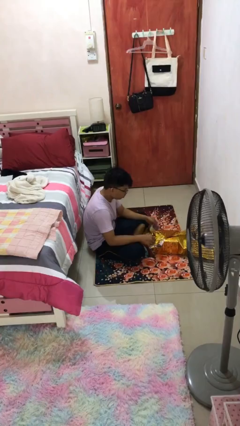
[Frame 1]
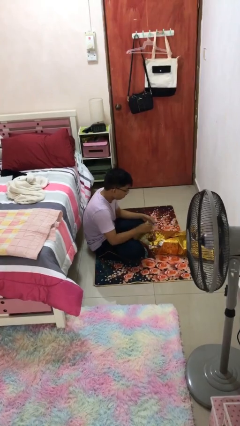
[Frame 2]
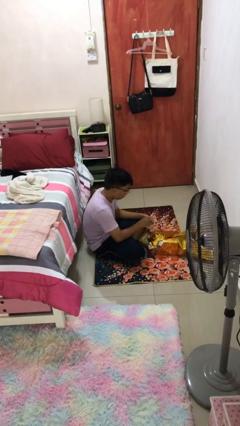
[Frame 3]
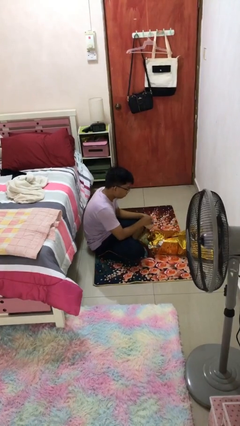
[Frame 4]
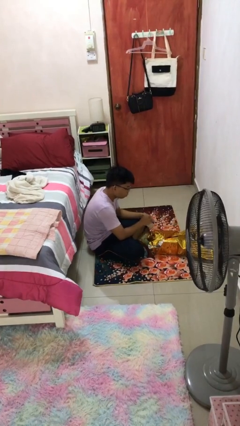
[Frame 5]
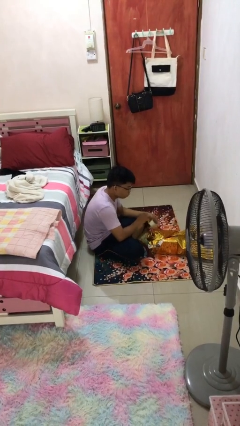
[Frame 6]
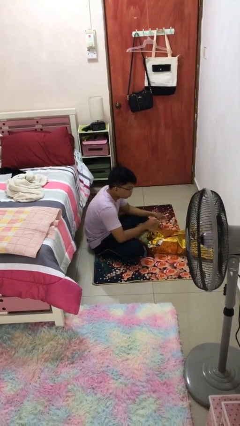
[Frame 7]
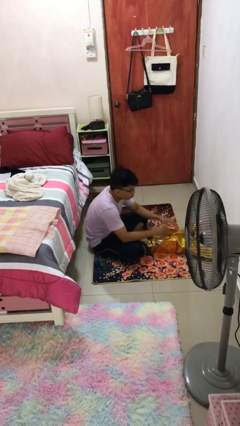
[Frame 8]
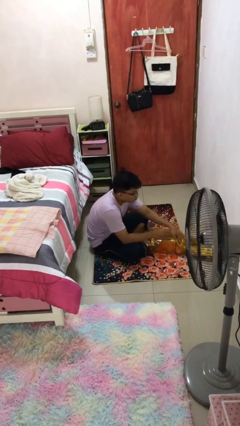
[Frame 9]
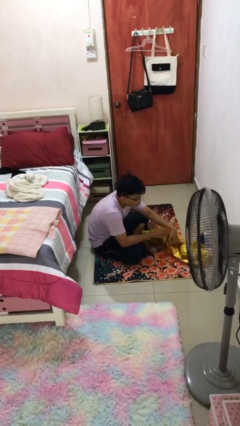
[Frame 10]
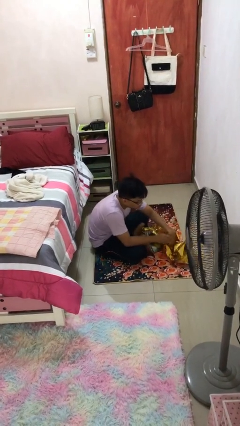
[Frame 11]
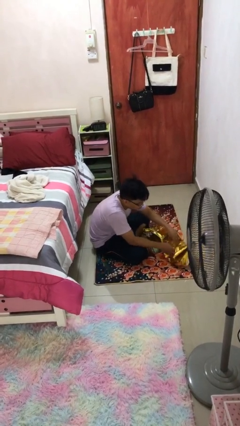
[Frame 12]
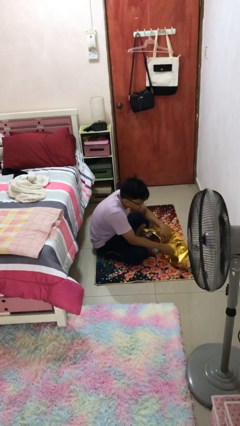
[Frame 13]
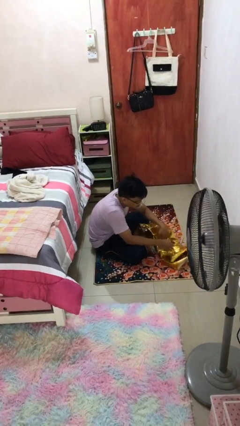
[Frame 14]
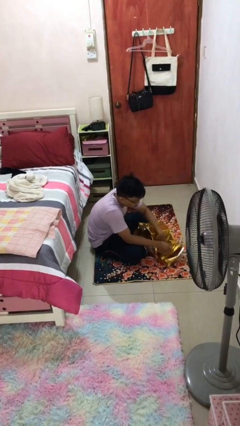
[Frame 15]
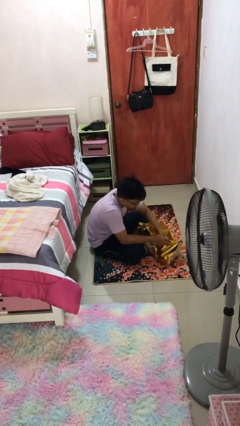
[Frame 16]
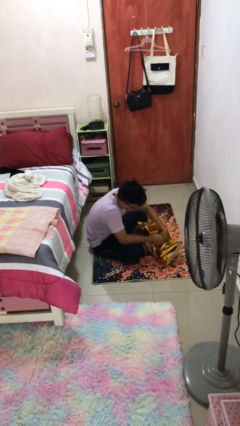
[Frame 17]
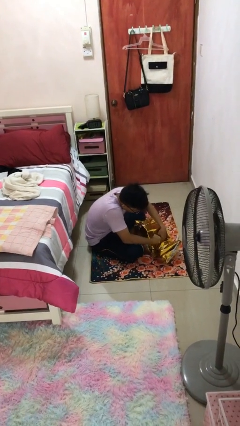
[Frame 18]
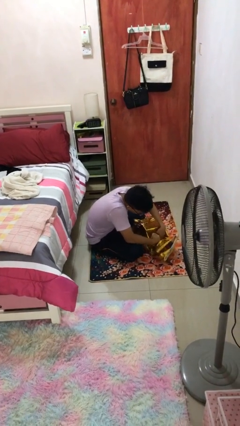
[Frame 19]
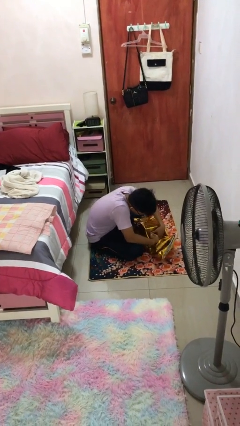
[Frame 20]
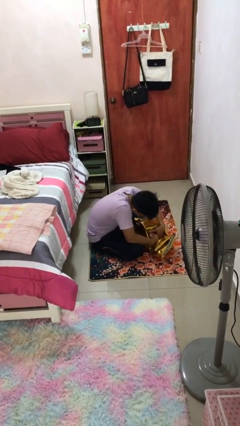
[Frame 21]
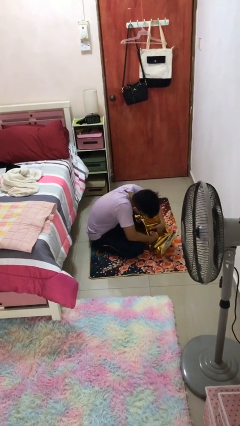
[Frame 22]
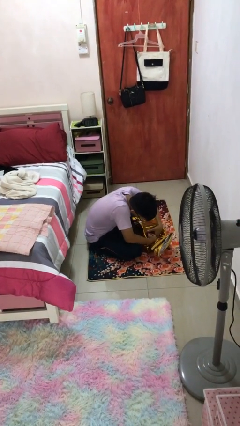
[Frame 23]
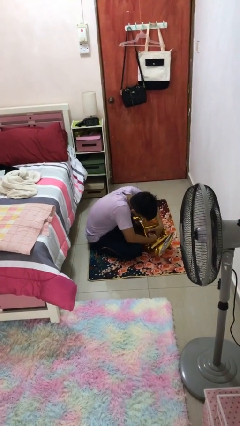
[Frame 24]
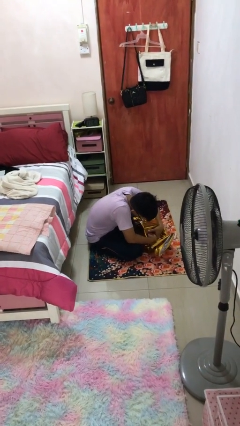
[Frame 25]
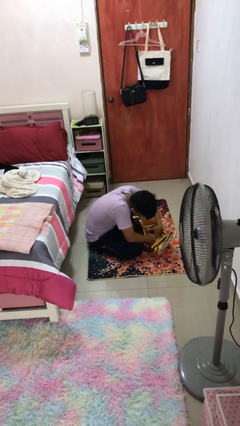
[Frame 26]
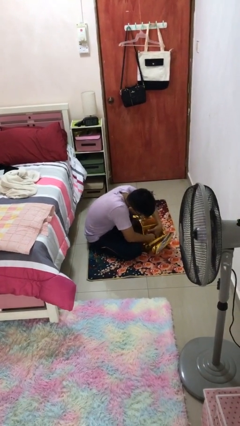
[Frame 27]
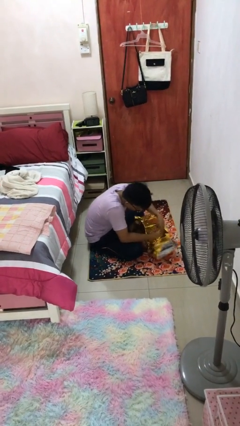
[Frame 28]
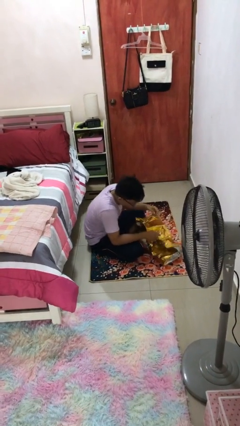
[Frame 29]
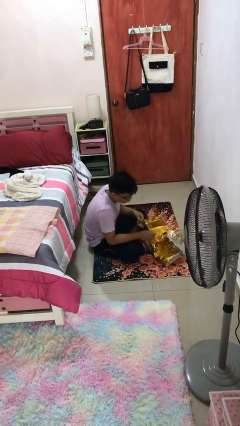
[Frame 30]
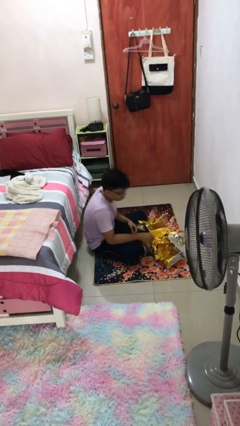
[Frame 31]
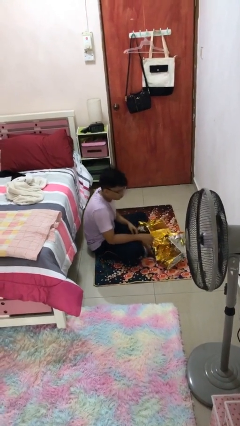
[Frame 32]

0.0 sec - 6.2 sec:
person wraps box

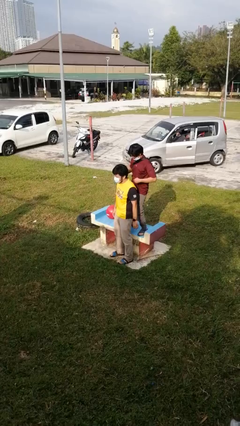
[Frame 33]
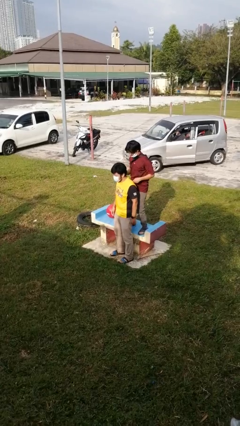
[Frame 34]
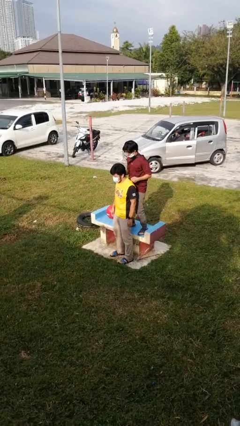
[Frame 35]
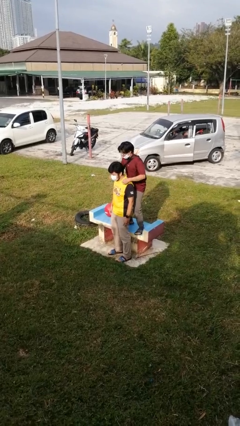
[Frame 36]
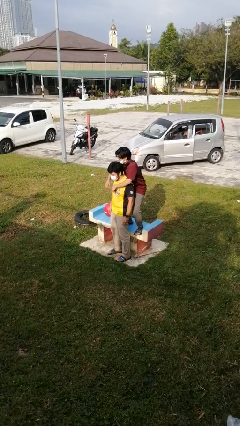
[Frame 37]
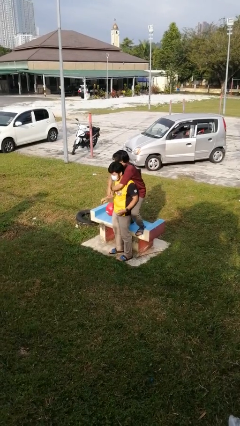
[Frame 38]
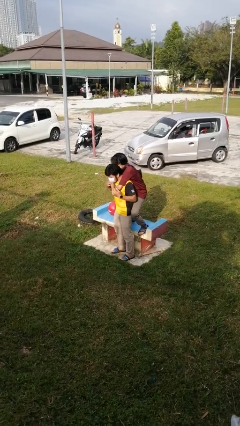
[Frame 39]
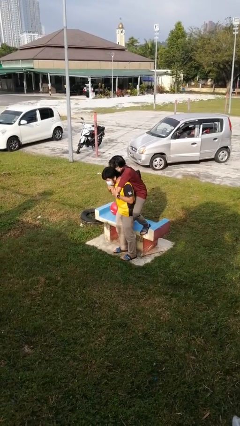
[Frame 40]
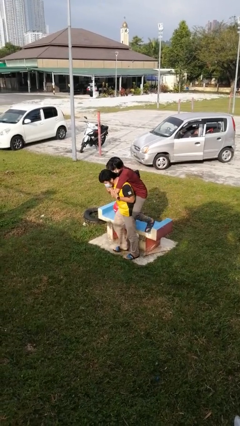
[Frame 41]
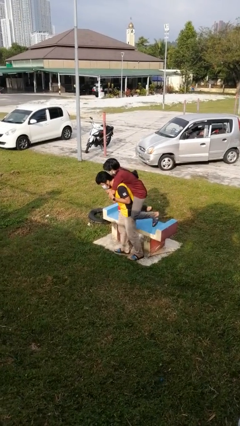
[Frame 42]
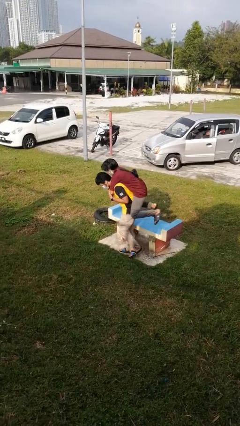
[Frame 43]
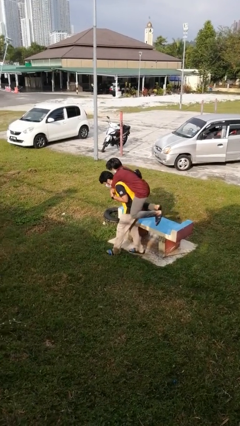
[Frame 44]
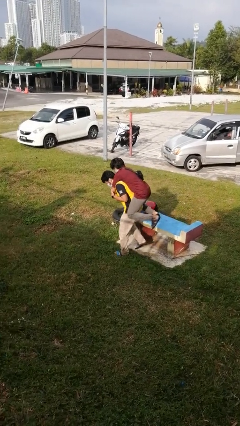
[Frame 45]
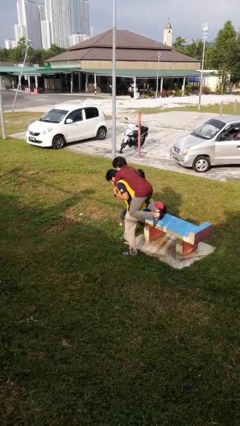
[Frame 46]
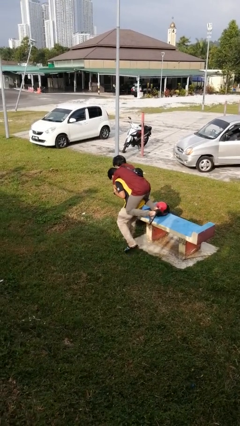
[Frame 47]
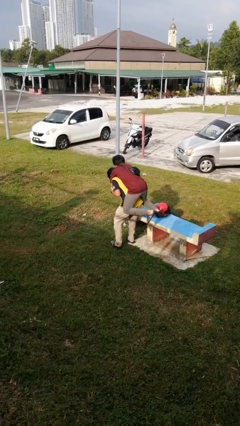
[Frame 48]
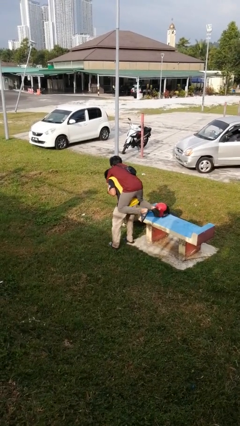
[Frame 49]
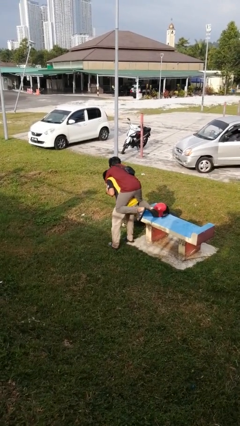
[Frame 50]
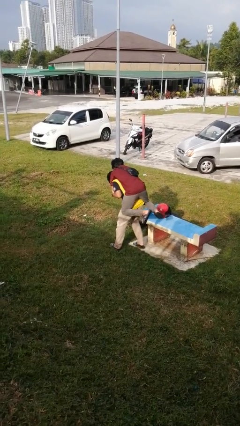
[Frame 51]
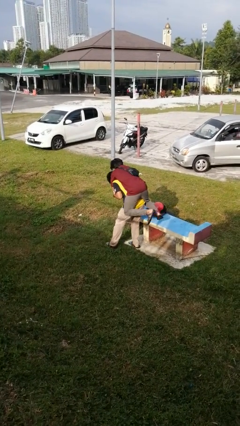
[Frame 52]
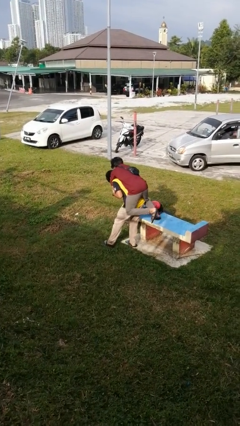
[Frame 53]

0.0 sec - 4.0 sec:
person carries person over shoulder

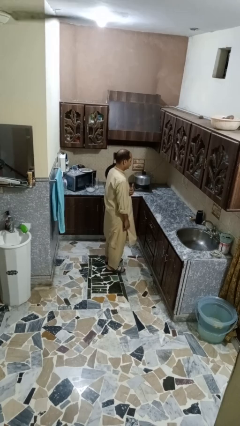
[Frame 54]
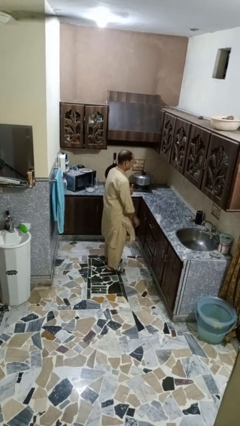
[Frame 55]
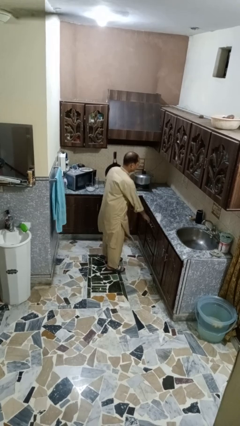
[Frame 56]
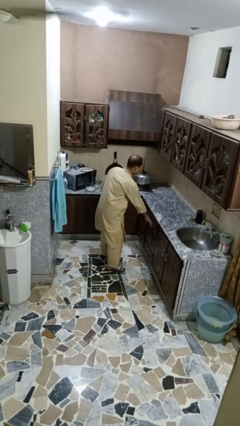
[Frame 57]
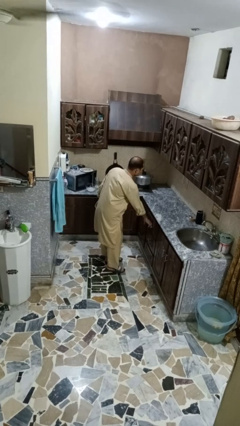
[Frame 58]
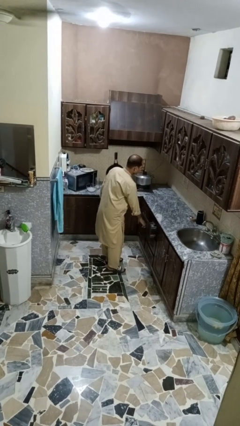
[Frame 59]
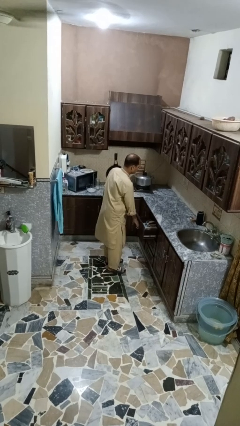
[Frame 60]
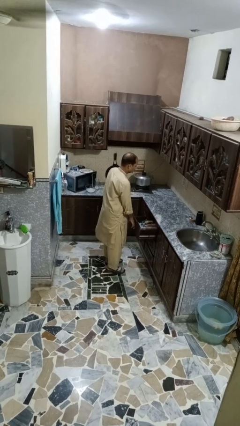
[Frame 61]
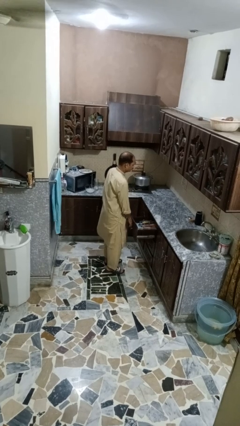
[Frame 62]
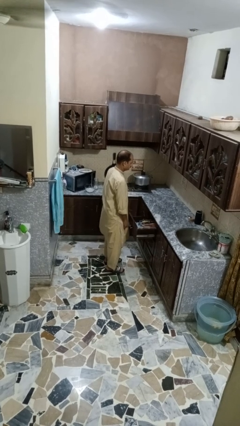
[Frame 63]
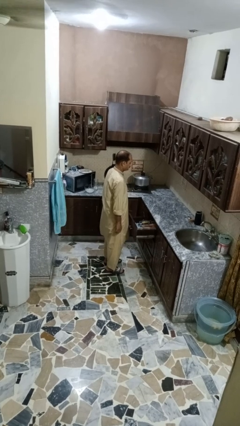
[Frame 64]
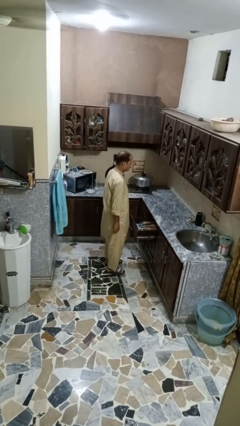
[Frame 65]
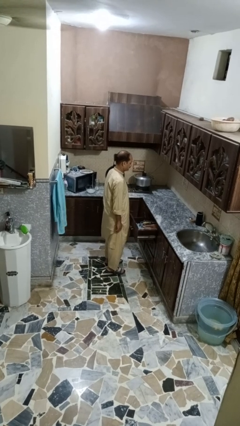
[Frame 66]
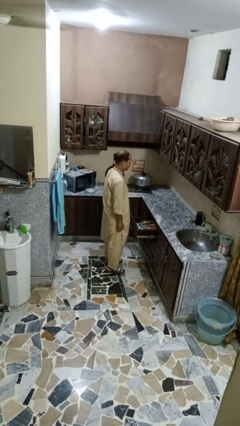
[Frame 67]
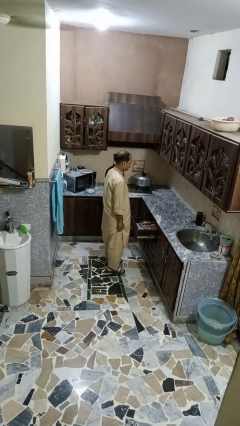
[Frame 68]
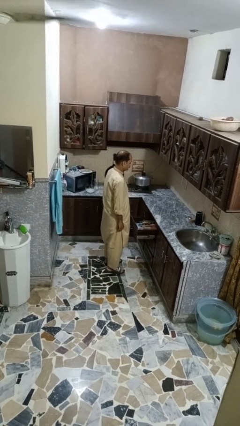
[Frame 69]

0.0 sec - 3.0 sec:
person opens kitchen drawer

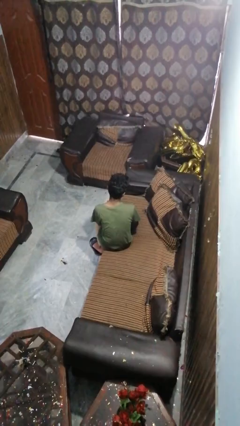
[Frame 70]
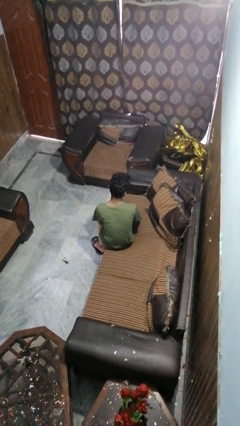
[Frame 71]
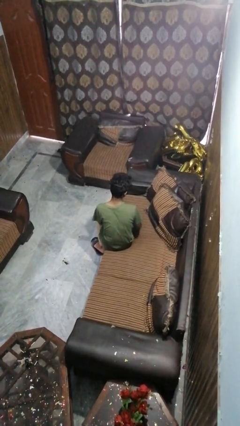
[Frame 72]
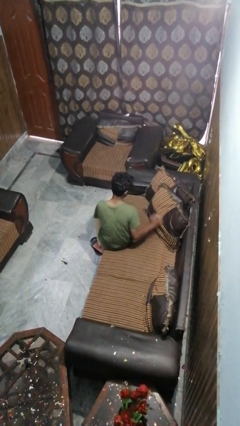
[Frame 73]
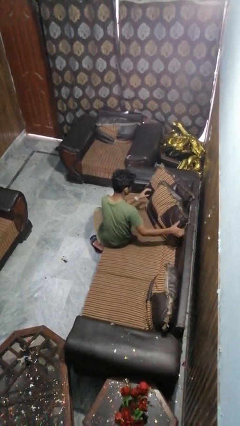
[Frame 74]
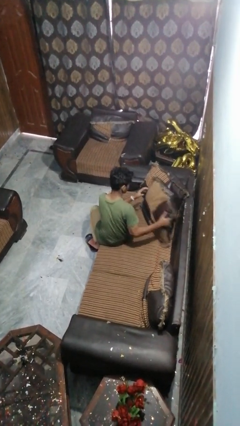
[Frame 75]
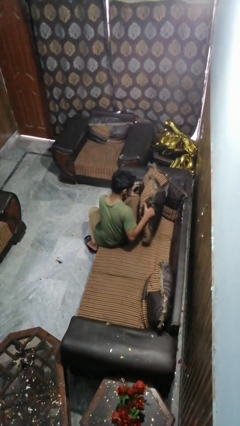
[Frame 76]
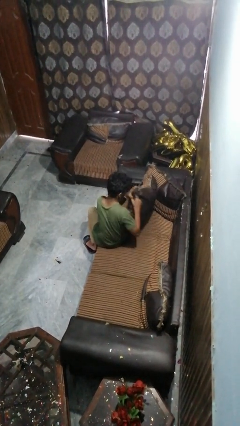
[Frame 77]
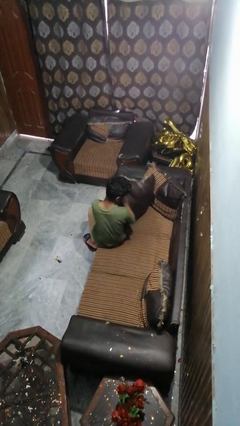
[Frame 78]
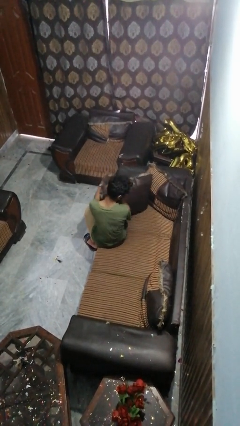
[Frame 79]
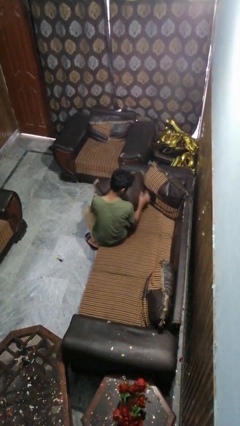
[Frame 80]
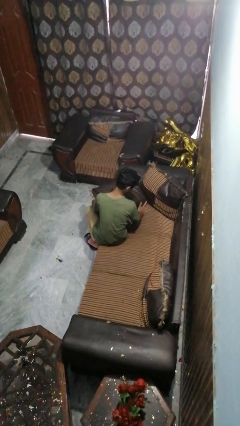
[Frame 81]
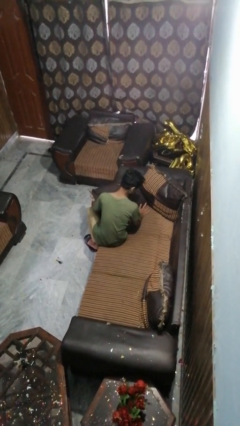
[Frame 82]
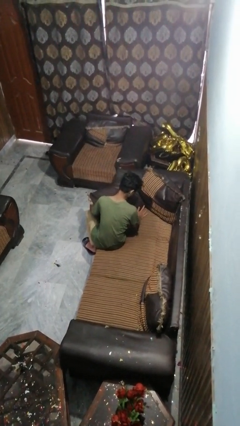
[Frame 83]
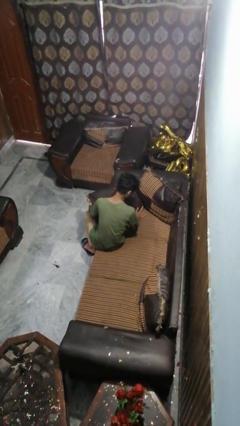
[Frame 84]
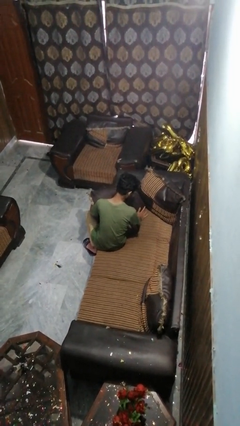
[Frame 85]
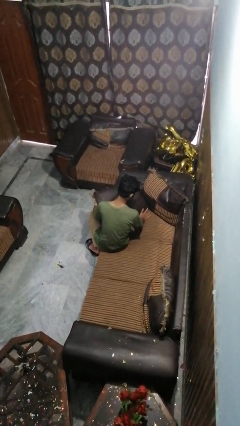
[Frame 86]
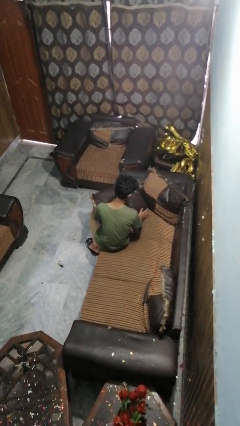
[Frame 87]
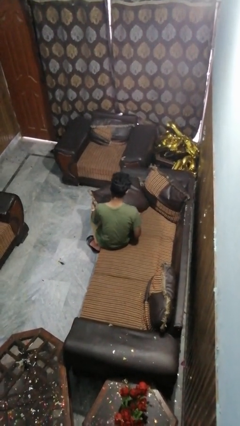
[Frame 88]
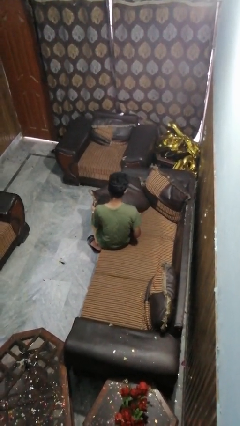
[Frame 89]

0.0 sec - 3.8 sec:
person searches in couch

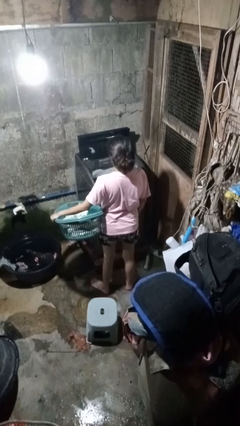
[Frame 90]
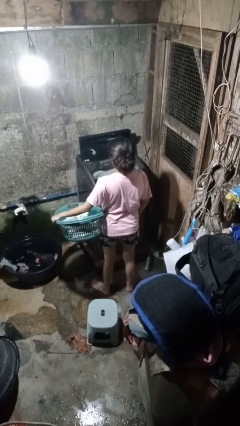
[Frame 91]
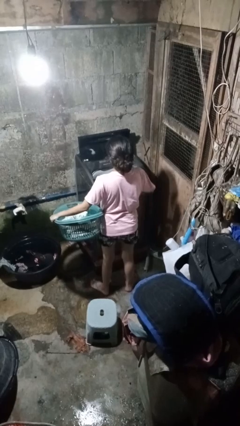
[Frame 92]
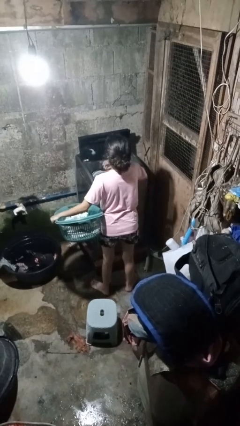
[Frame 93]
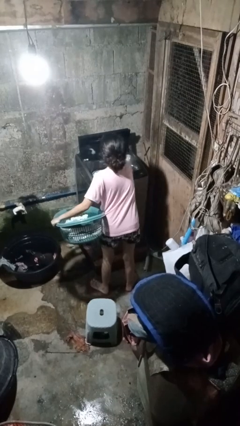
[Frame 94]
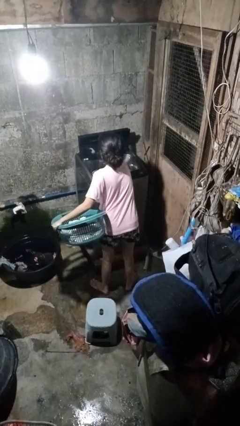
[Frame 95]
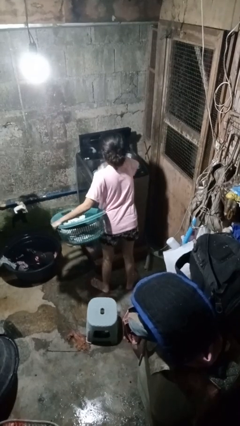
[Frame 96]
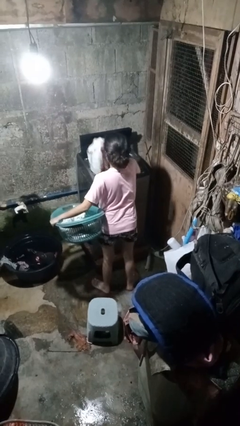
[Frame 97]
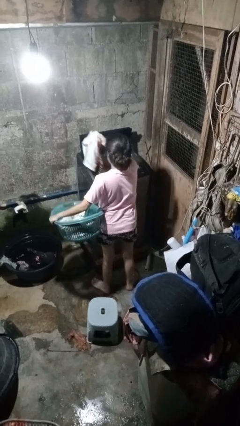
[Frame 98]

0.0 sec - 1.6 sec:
person unloads dryer
